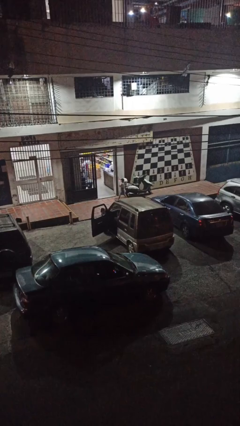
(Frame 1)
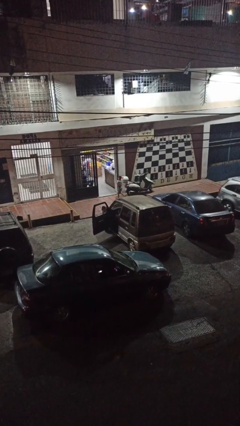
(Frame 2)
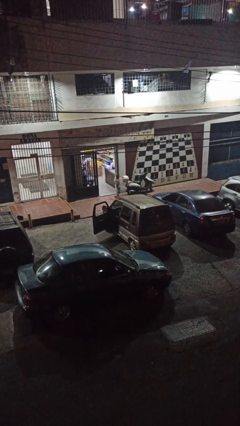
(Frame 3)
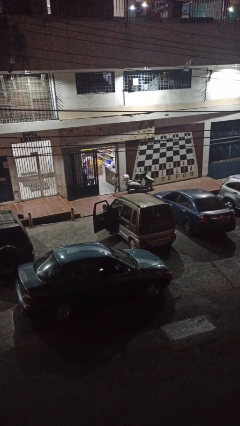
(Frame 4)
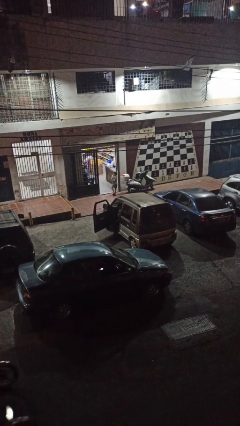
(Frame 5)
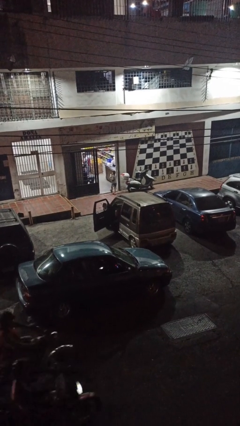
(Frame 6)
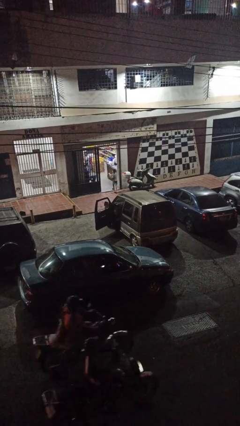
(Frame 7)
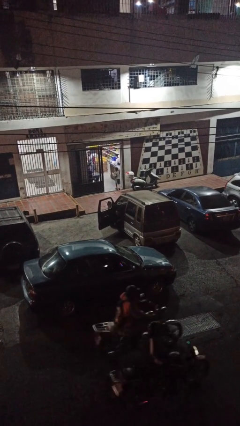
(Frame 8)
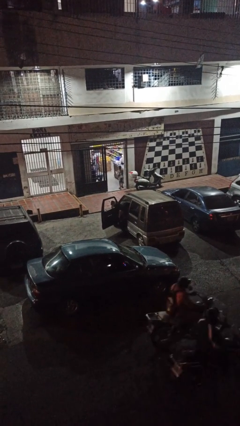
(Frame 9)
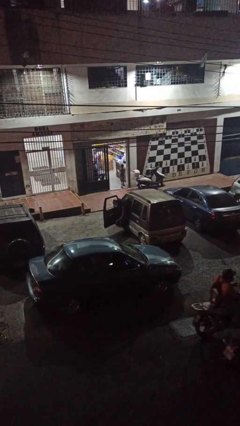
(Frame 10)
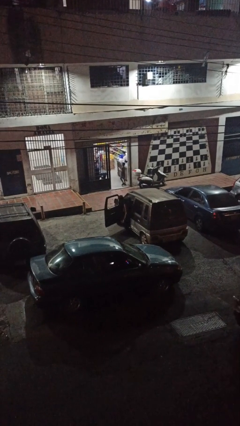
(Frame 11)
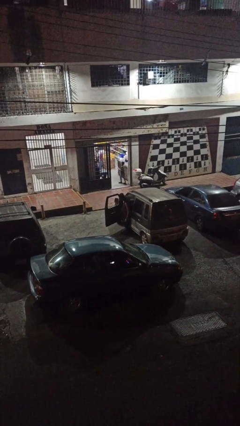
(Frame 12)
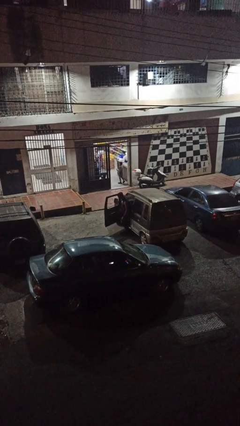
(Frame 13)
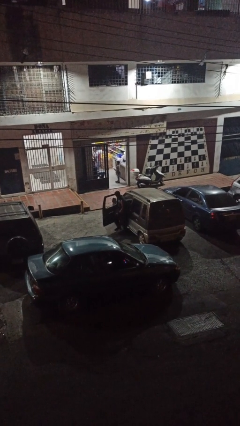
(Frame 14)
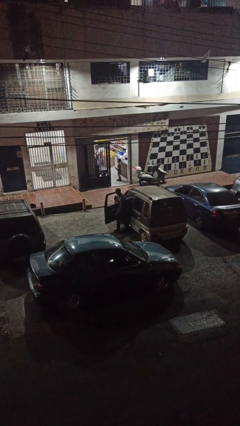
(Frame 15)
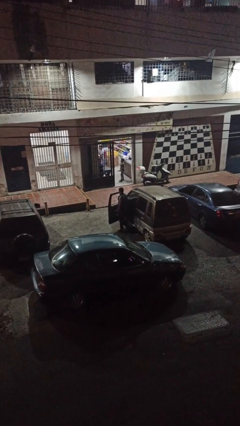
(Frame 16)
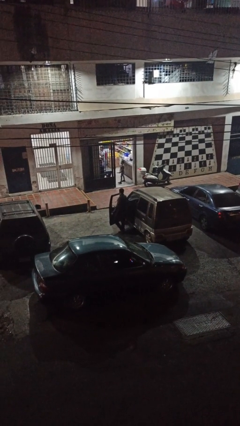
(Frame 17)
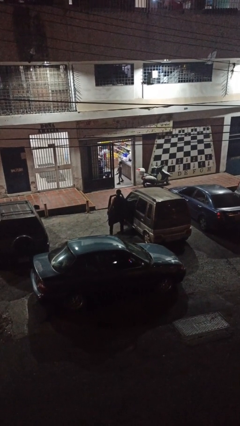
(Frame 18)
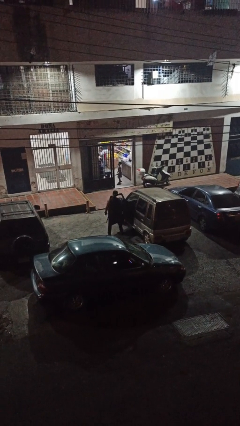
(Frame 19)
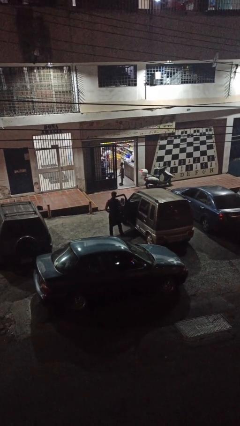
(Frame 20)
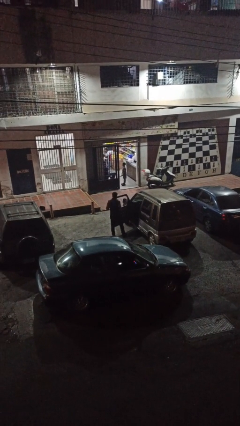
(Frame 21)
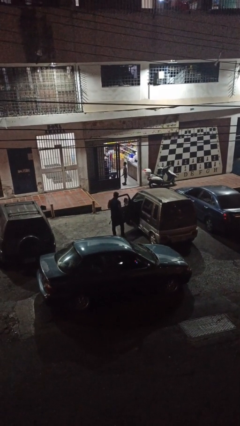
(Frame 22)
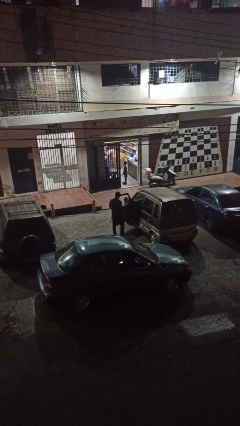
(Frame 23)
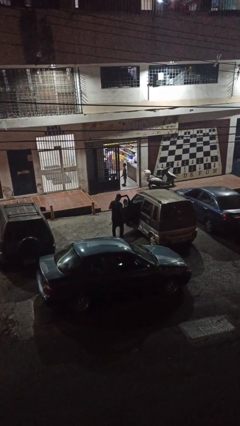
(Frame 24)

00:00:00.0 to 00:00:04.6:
person exits car

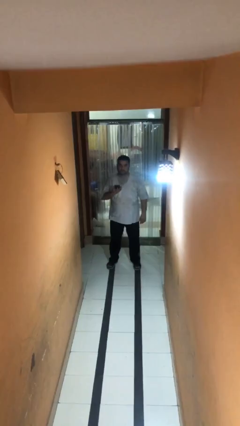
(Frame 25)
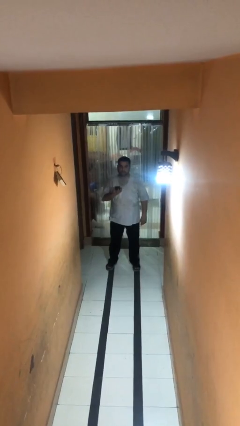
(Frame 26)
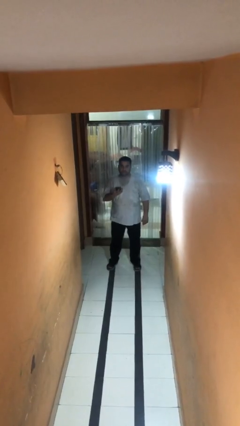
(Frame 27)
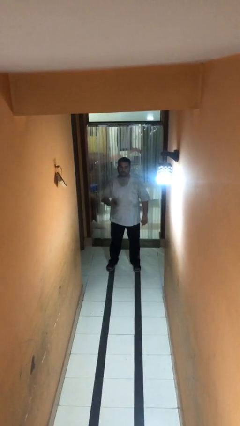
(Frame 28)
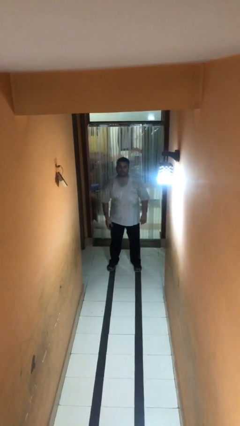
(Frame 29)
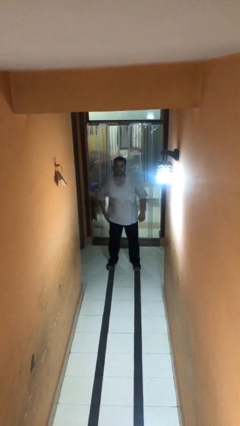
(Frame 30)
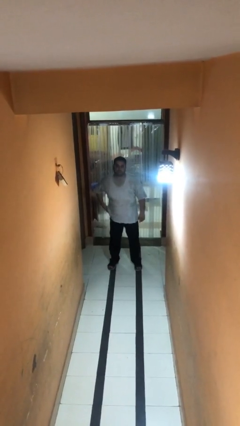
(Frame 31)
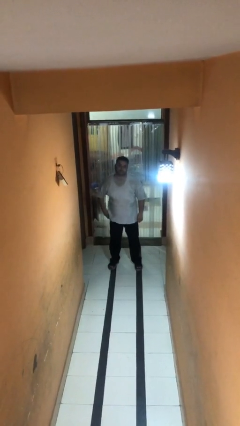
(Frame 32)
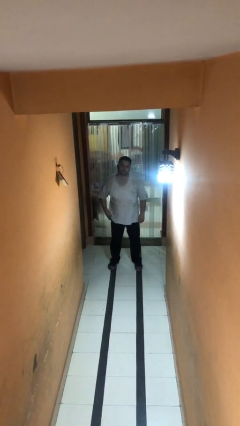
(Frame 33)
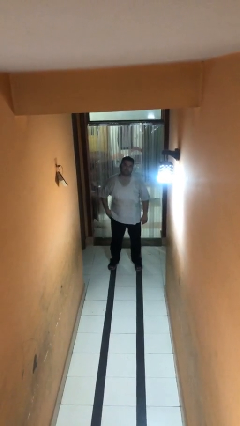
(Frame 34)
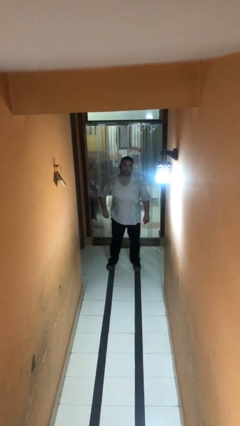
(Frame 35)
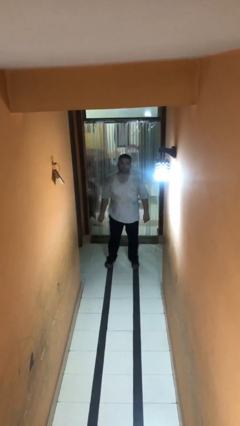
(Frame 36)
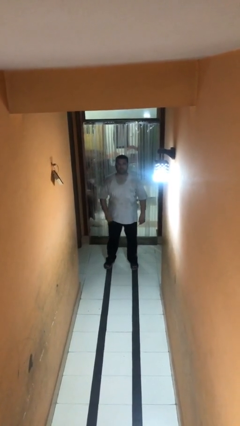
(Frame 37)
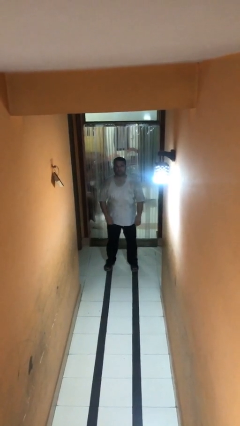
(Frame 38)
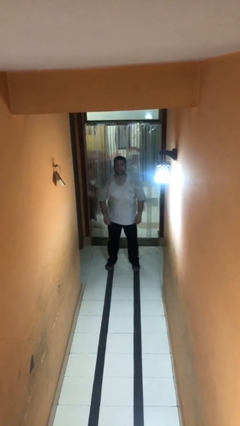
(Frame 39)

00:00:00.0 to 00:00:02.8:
person puts phone into pocket

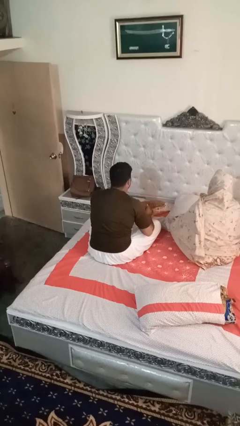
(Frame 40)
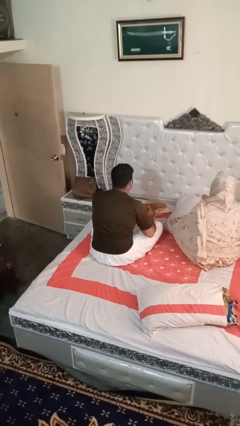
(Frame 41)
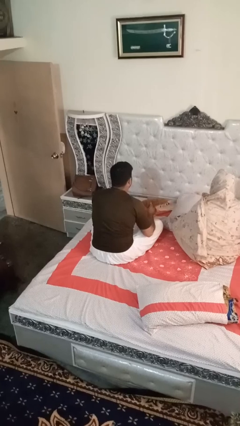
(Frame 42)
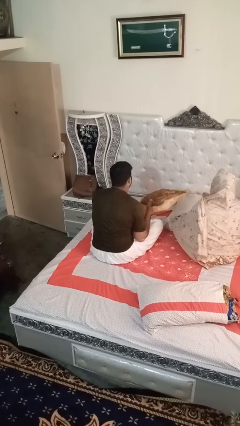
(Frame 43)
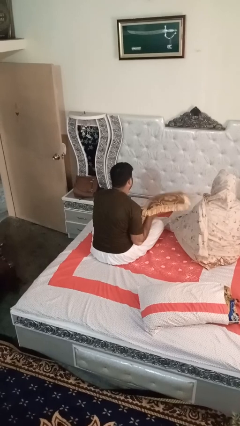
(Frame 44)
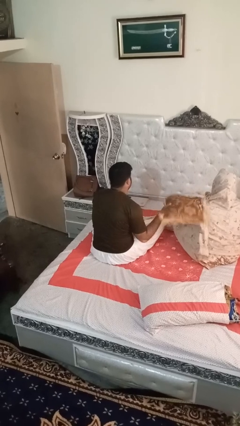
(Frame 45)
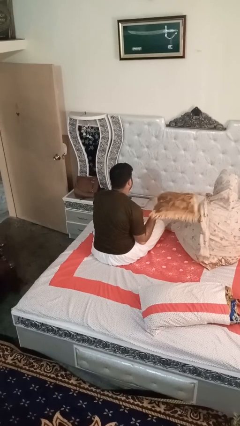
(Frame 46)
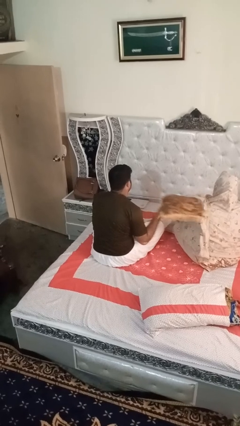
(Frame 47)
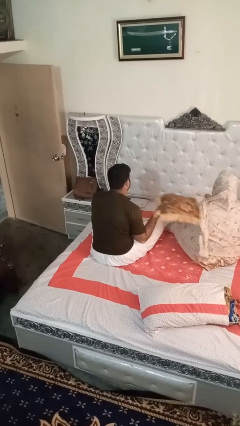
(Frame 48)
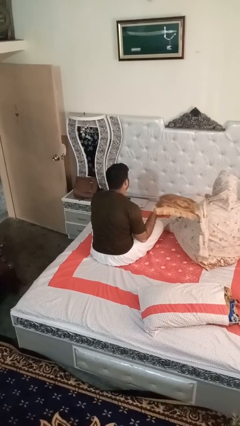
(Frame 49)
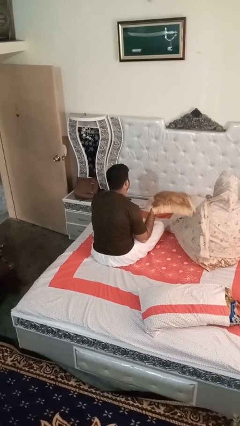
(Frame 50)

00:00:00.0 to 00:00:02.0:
person hits person with pillow

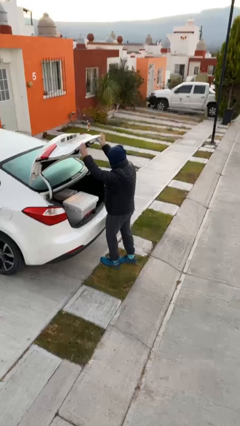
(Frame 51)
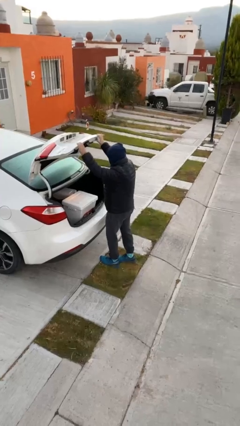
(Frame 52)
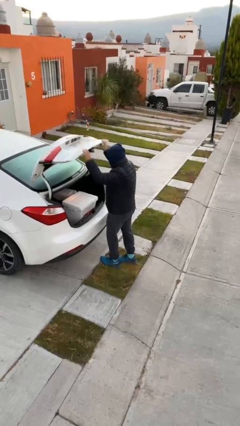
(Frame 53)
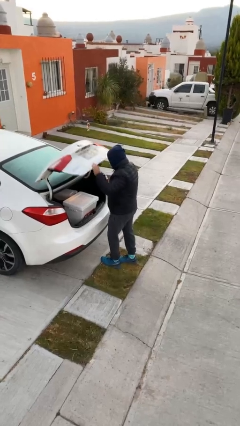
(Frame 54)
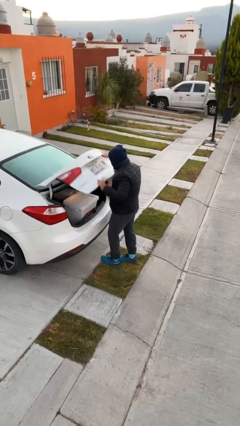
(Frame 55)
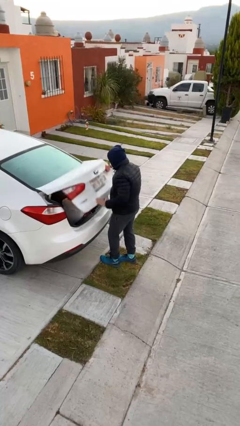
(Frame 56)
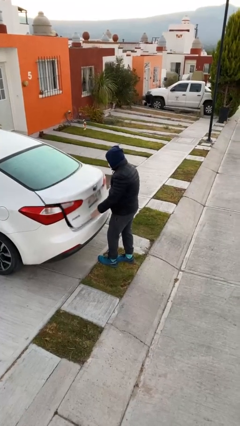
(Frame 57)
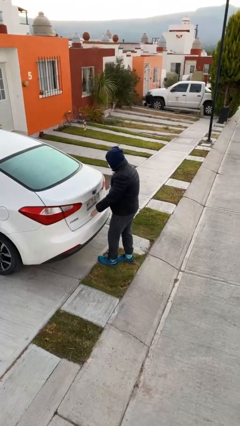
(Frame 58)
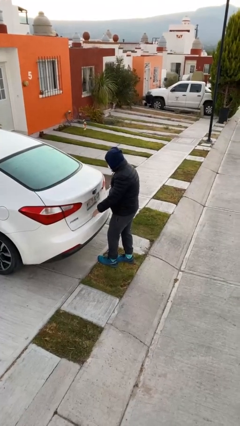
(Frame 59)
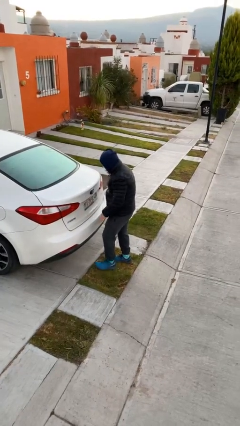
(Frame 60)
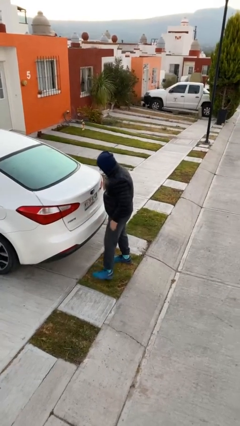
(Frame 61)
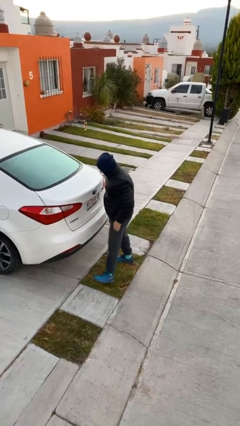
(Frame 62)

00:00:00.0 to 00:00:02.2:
person closes car trunk

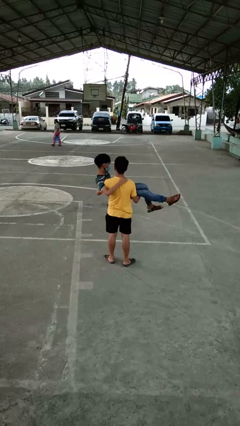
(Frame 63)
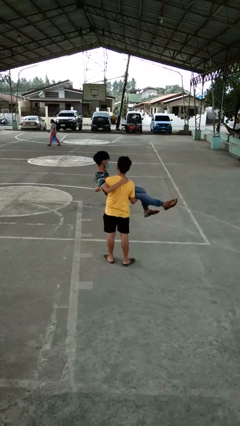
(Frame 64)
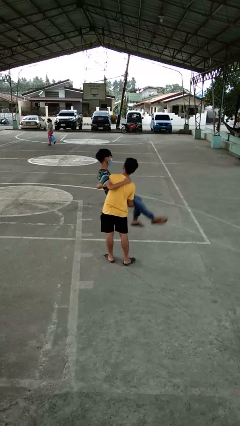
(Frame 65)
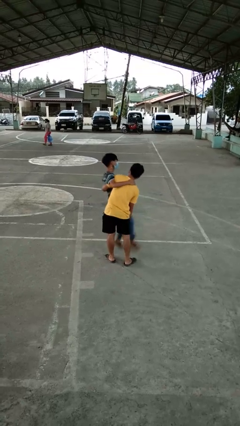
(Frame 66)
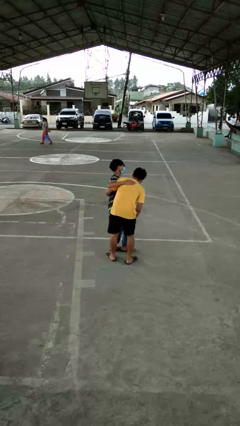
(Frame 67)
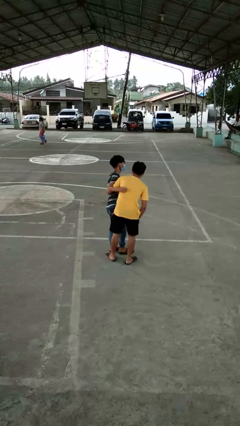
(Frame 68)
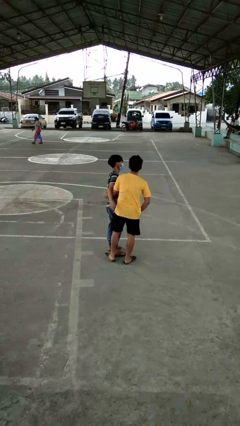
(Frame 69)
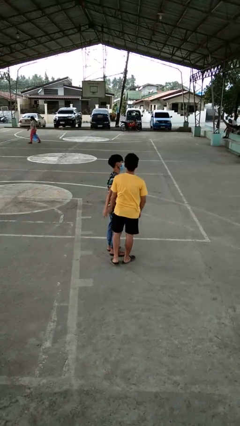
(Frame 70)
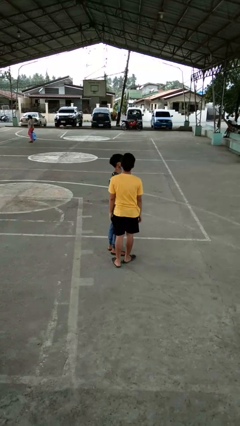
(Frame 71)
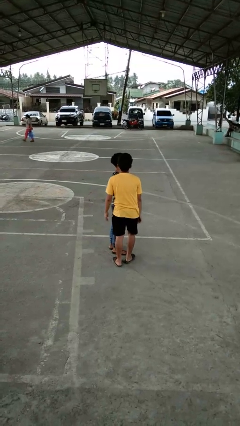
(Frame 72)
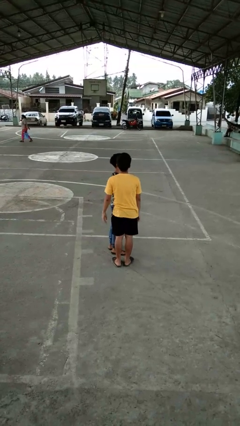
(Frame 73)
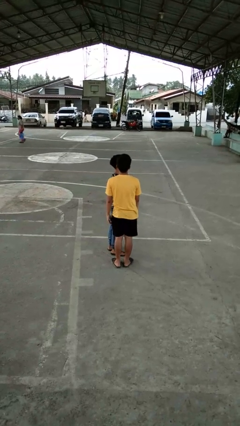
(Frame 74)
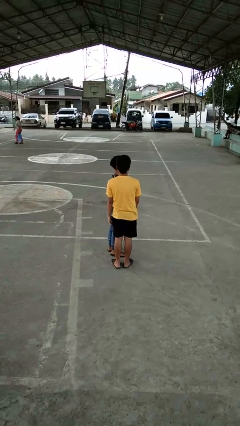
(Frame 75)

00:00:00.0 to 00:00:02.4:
person puts down person

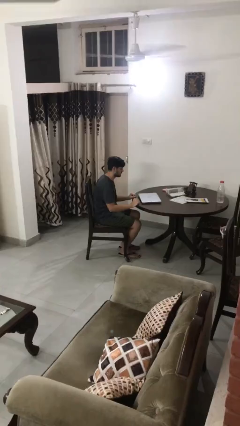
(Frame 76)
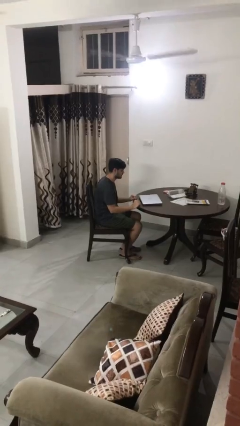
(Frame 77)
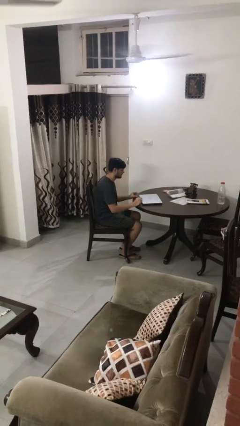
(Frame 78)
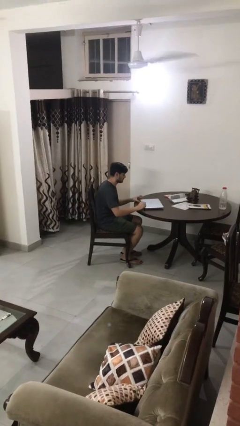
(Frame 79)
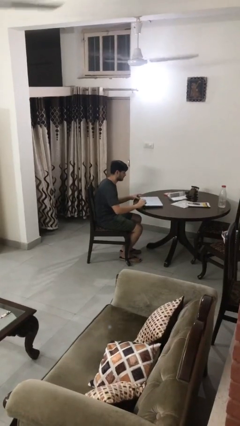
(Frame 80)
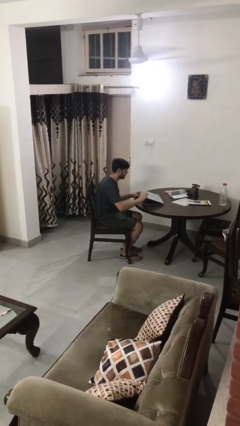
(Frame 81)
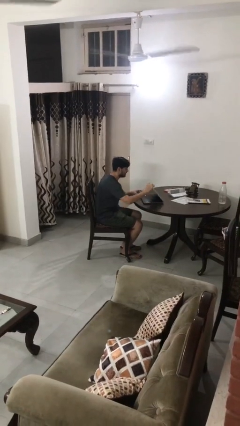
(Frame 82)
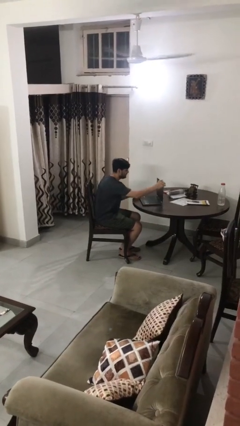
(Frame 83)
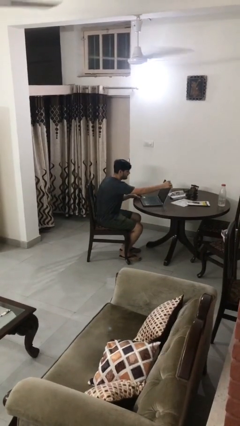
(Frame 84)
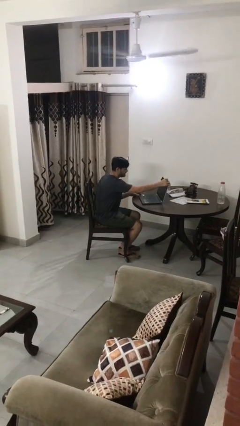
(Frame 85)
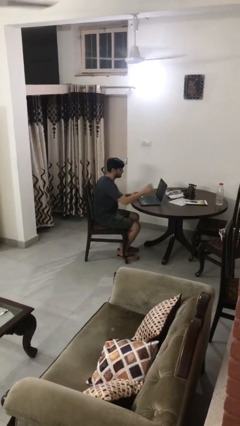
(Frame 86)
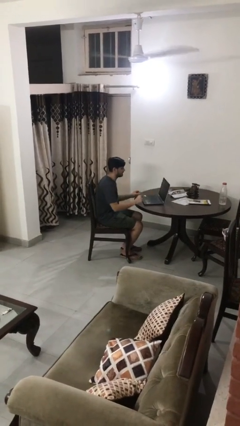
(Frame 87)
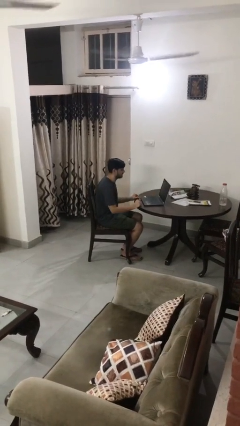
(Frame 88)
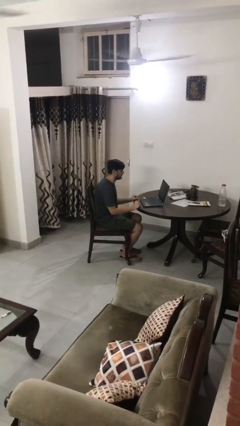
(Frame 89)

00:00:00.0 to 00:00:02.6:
person opens laptop

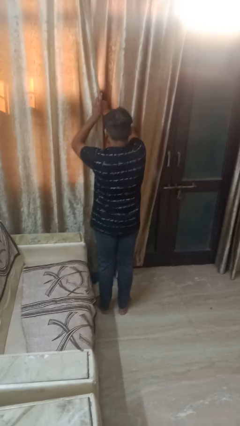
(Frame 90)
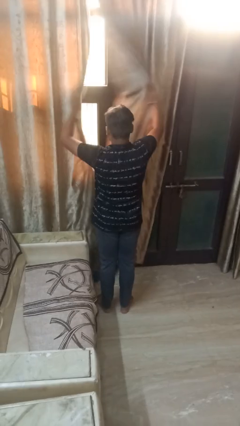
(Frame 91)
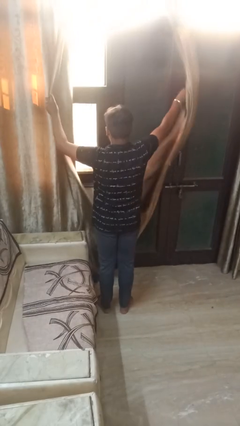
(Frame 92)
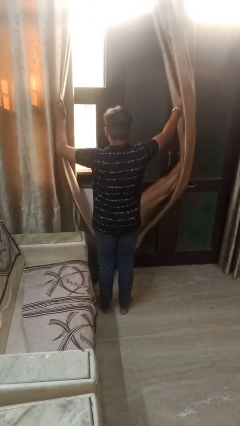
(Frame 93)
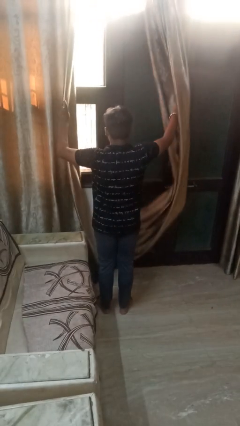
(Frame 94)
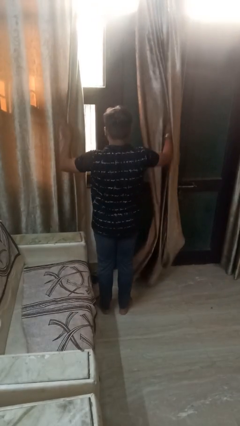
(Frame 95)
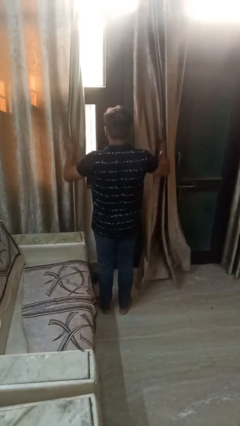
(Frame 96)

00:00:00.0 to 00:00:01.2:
person opens curtains
